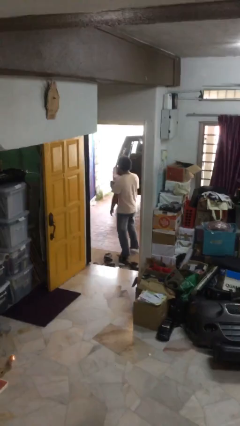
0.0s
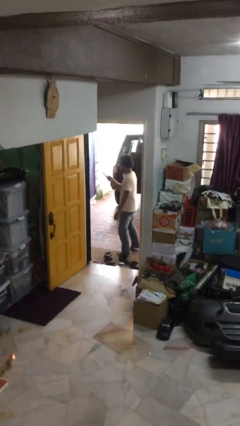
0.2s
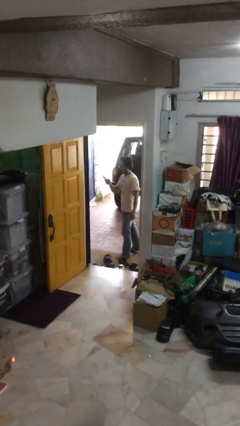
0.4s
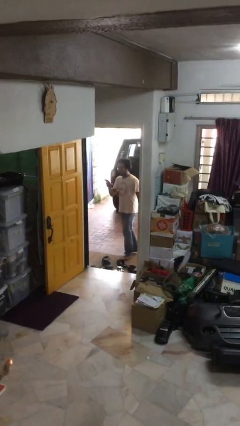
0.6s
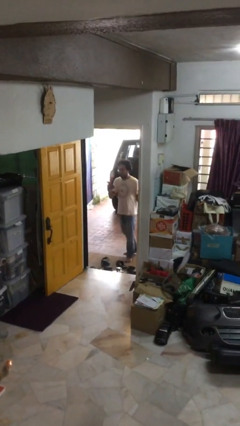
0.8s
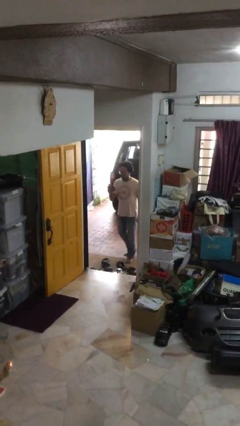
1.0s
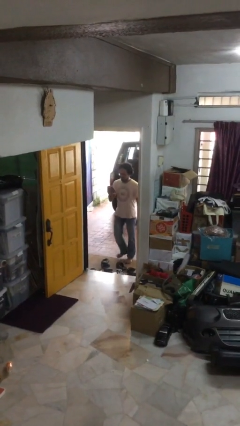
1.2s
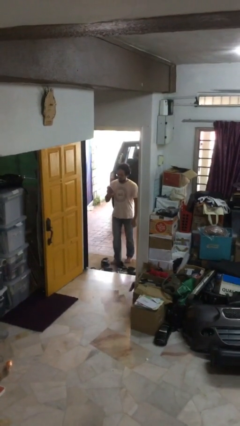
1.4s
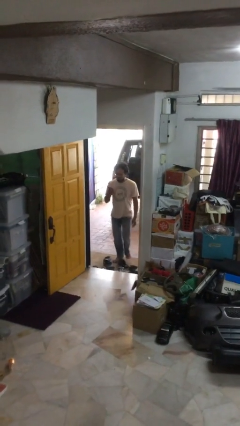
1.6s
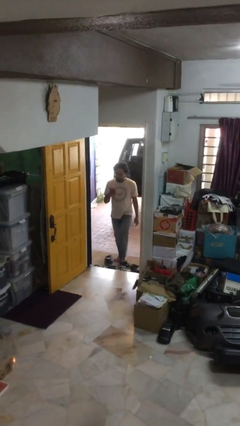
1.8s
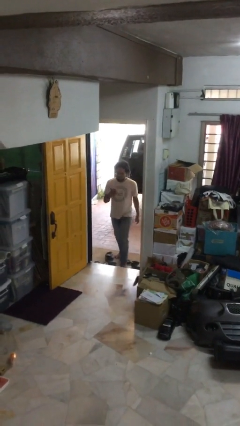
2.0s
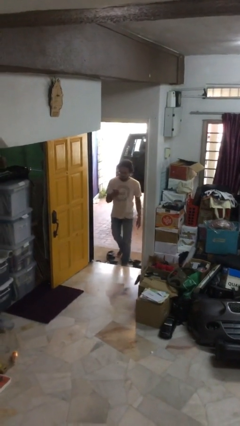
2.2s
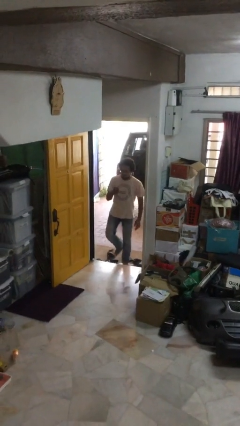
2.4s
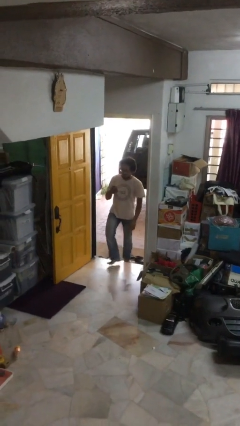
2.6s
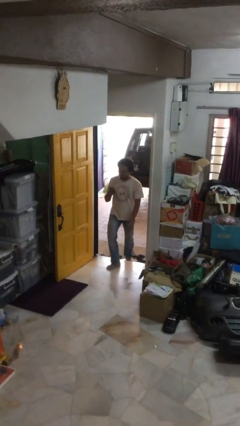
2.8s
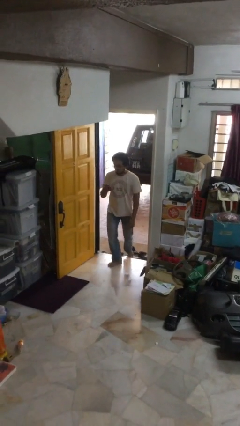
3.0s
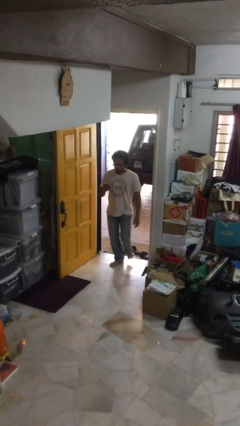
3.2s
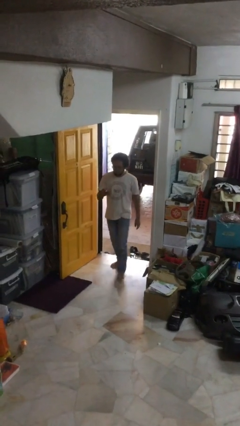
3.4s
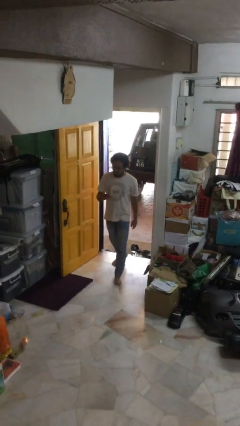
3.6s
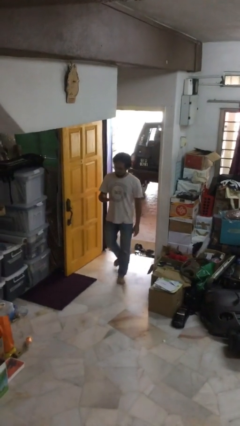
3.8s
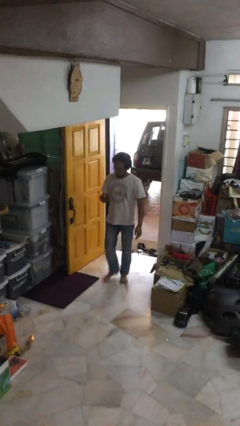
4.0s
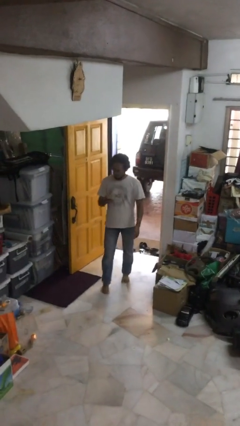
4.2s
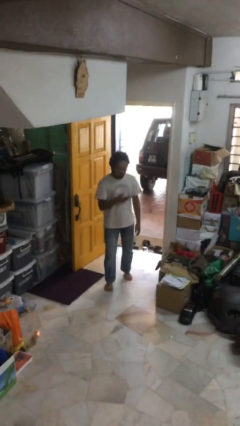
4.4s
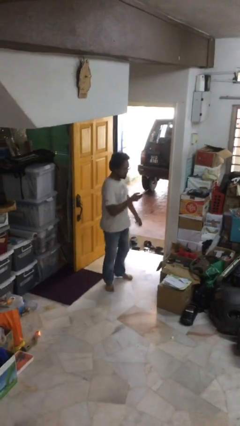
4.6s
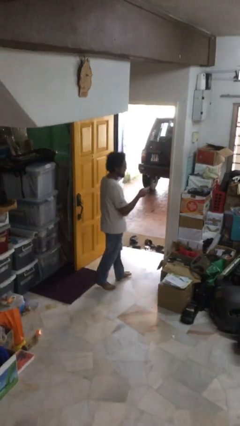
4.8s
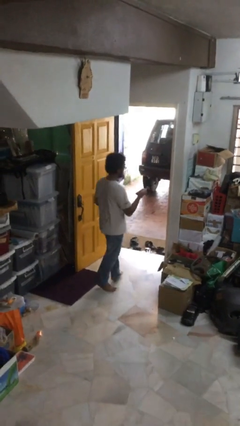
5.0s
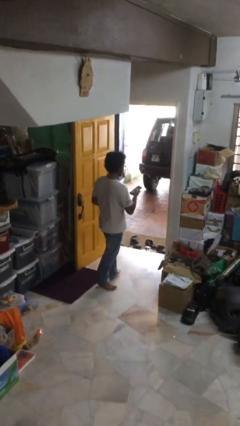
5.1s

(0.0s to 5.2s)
person enters scene through structure

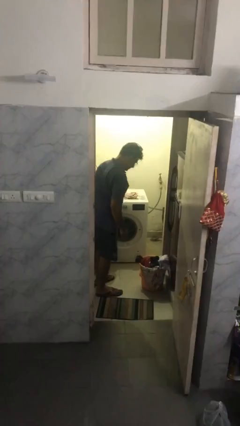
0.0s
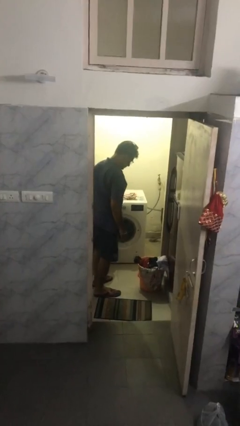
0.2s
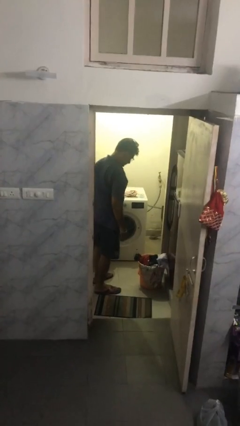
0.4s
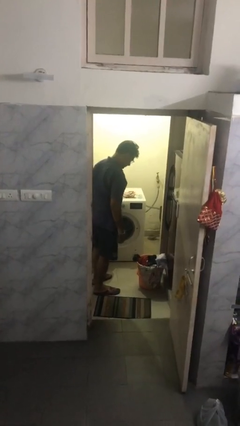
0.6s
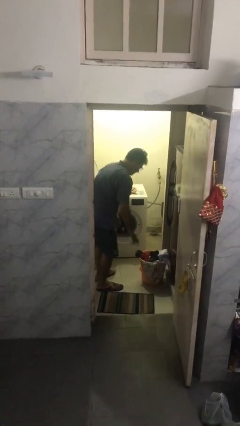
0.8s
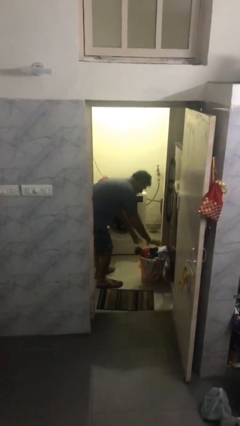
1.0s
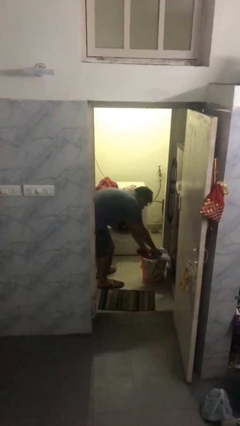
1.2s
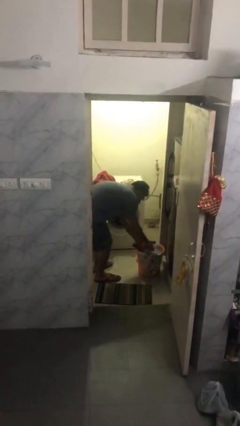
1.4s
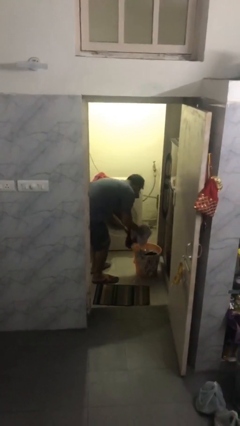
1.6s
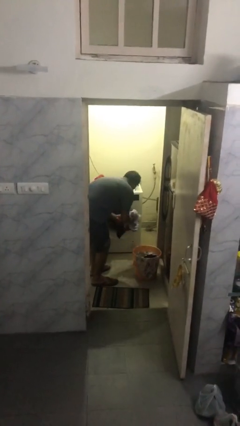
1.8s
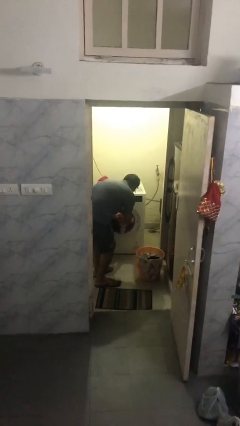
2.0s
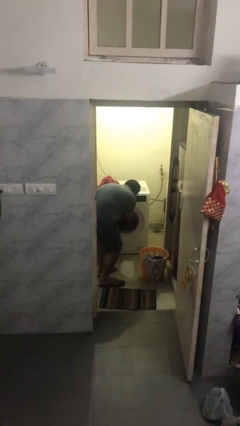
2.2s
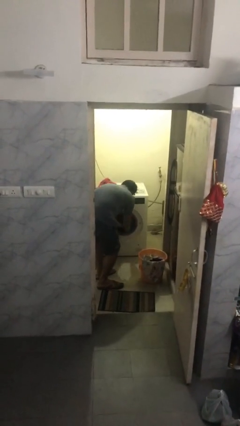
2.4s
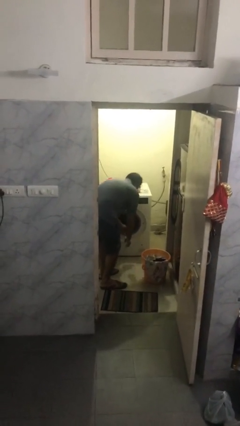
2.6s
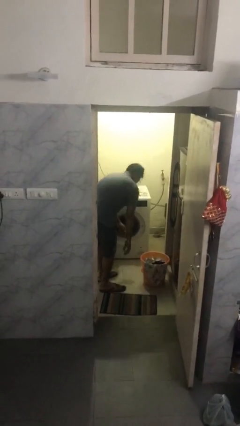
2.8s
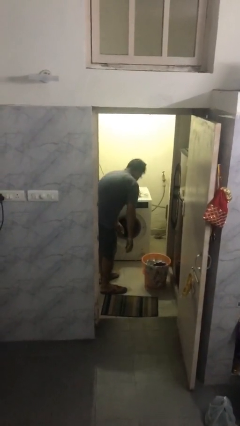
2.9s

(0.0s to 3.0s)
person loads clotheswasher

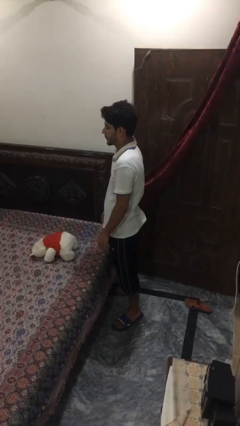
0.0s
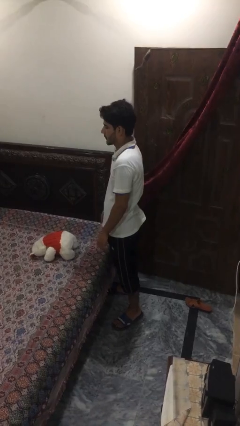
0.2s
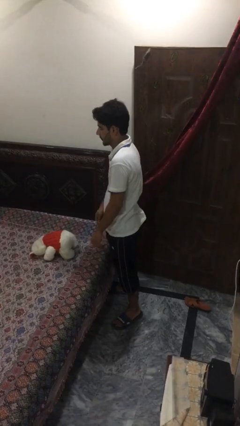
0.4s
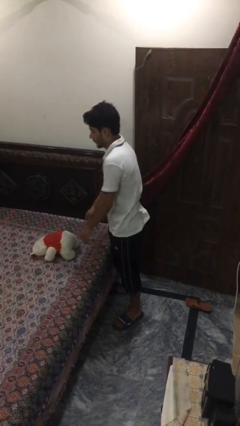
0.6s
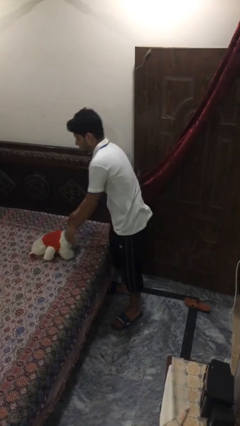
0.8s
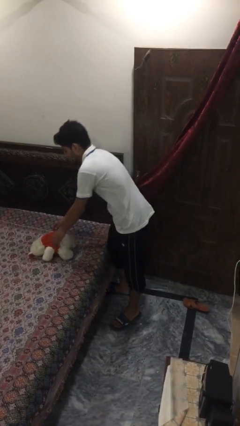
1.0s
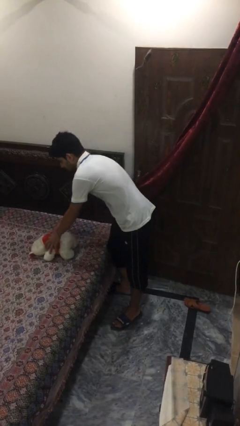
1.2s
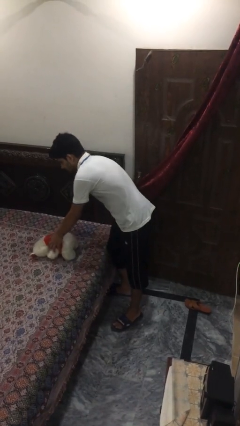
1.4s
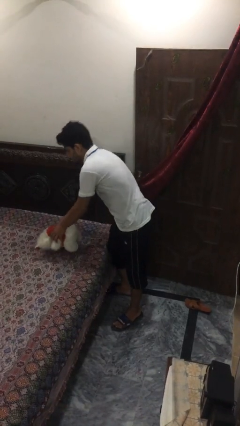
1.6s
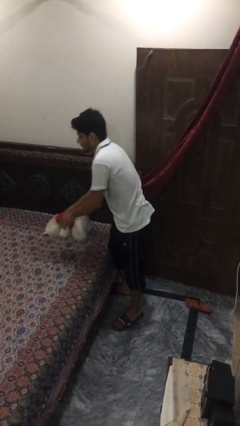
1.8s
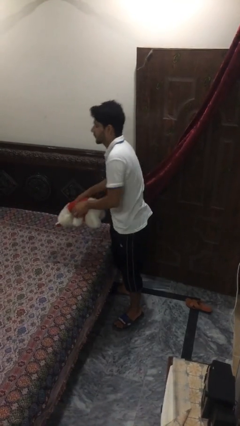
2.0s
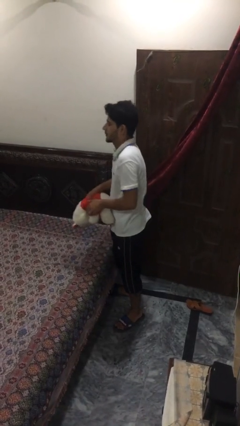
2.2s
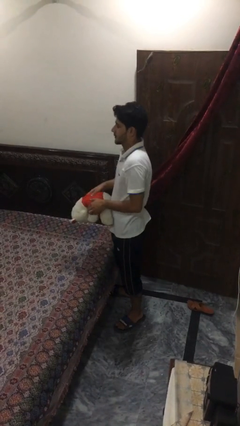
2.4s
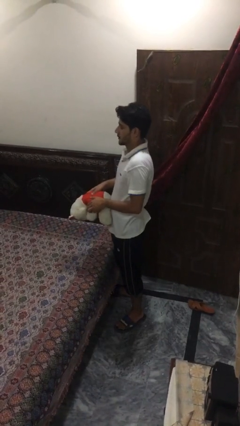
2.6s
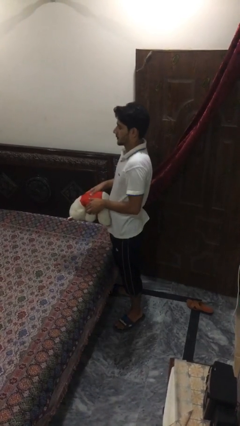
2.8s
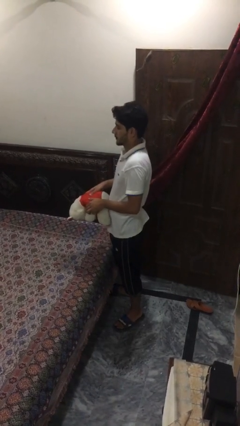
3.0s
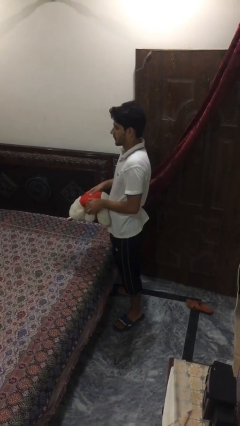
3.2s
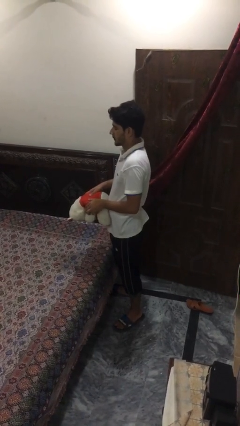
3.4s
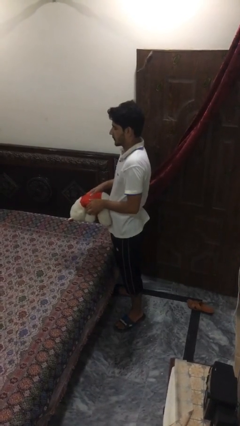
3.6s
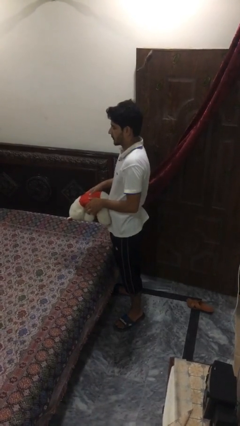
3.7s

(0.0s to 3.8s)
person picks up object from bed

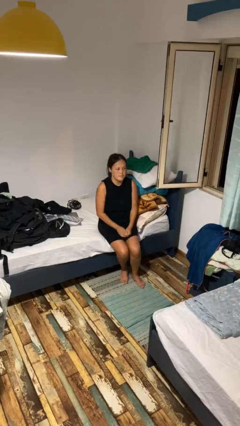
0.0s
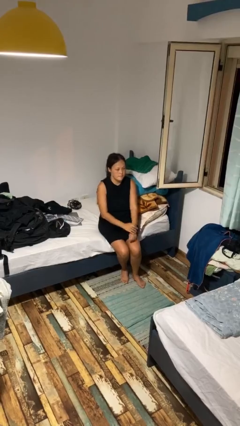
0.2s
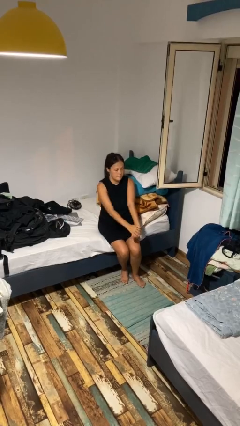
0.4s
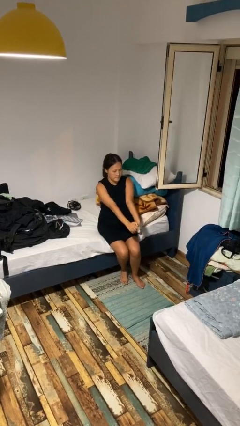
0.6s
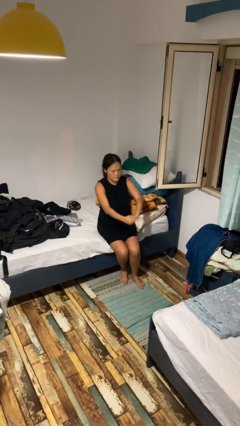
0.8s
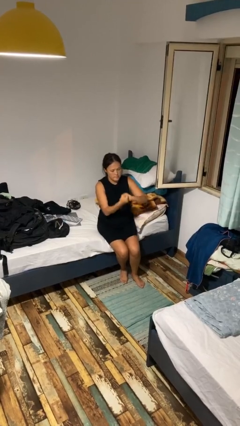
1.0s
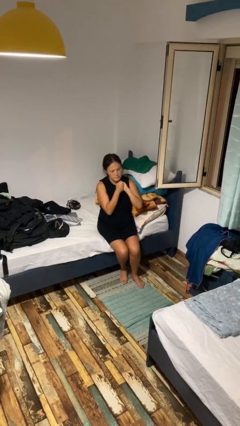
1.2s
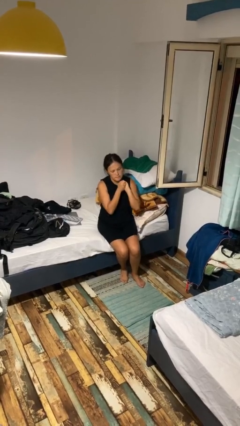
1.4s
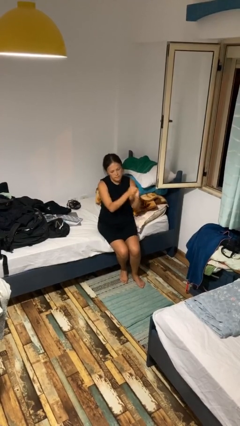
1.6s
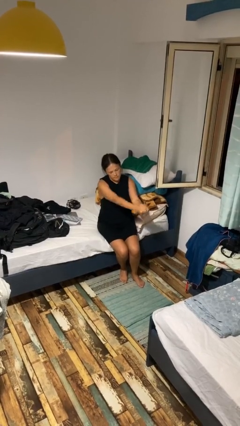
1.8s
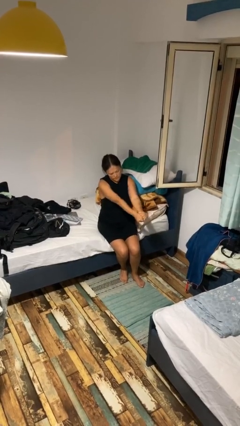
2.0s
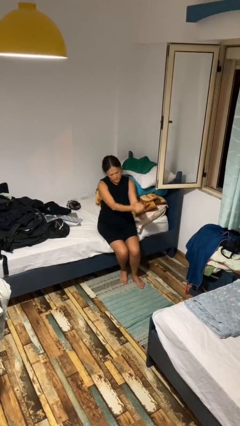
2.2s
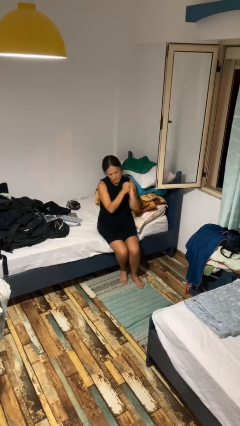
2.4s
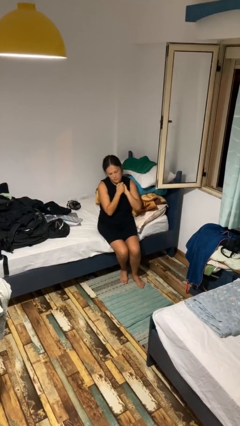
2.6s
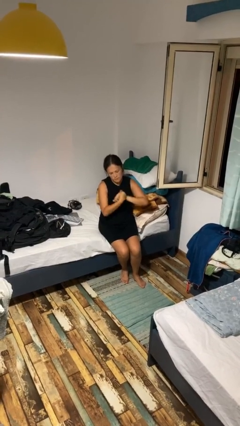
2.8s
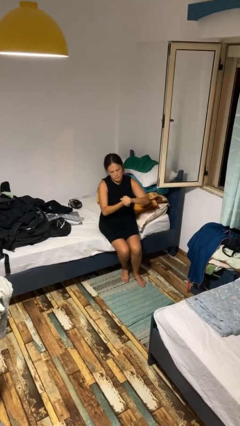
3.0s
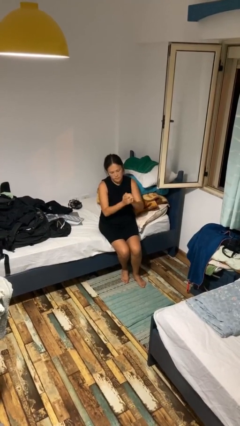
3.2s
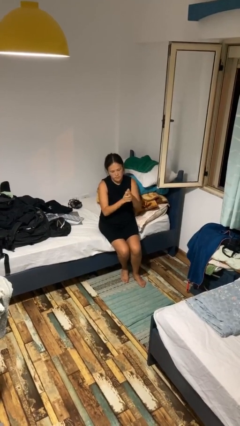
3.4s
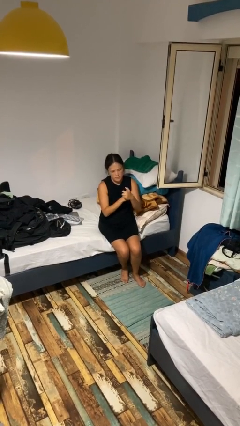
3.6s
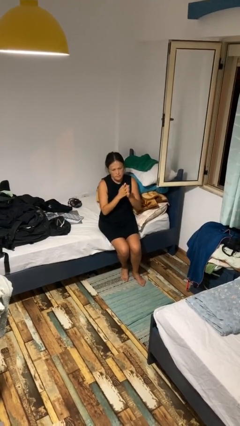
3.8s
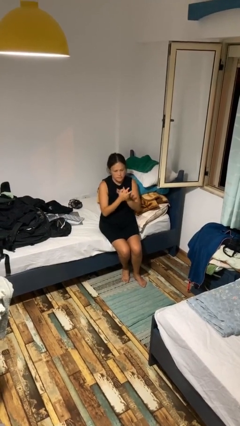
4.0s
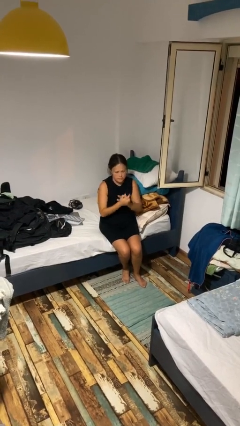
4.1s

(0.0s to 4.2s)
person cracks knuckles

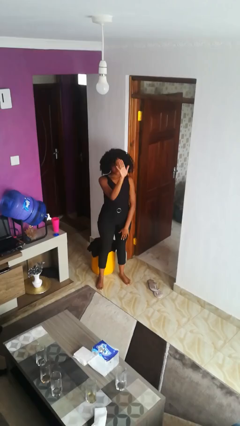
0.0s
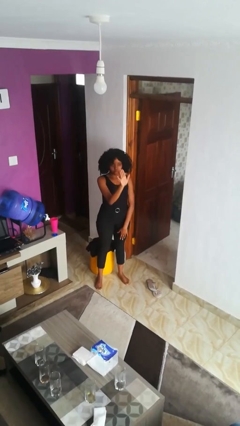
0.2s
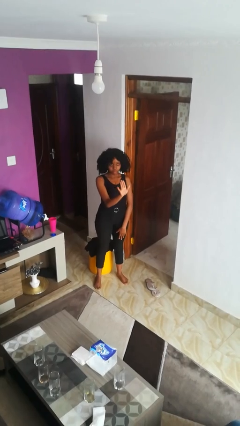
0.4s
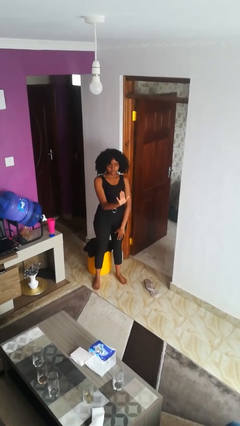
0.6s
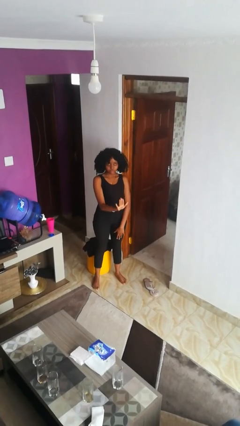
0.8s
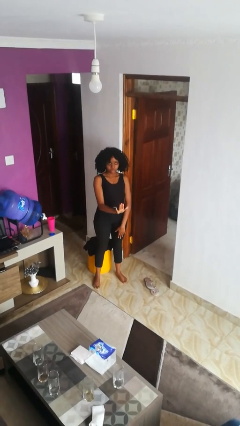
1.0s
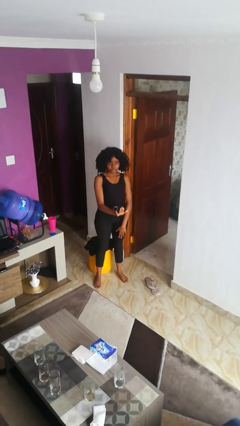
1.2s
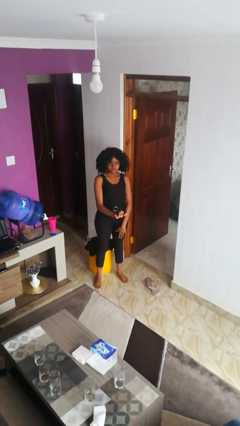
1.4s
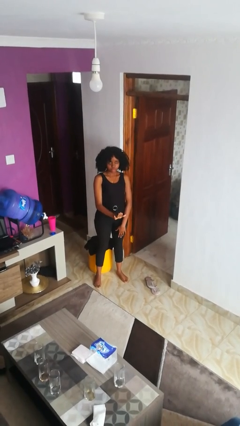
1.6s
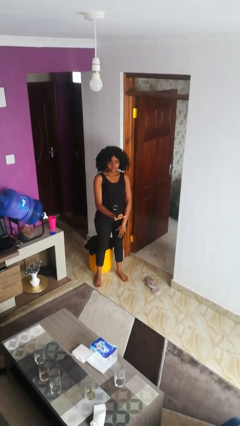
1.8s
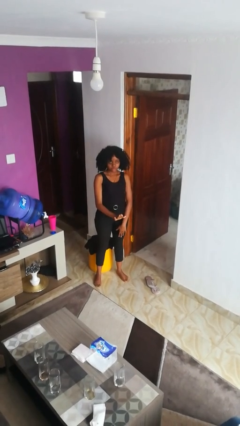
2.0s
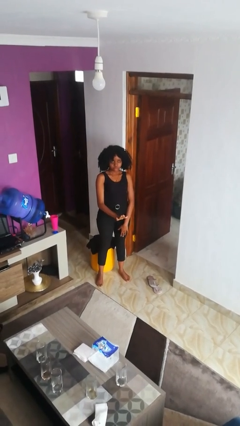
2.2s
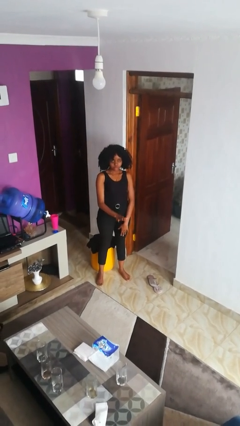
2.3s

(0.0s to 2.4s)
person gestures swipe down
